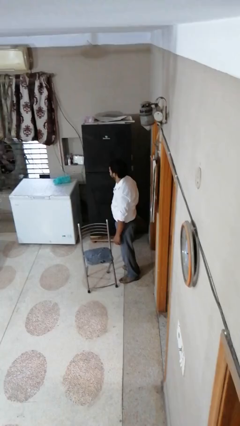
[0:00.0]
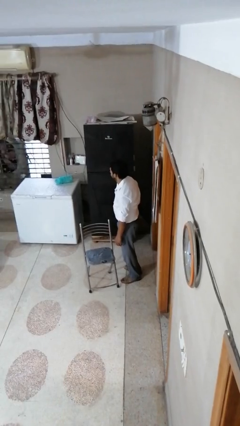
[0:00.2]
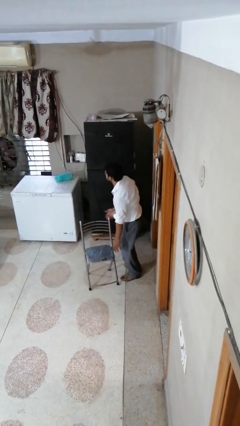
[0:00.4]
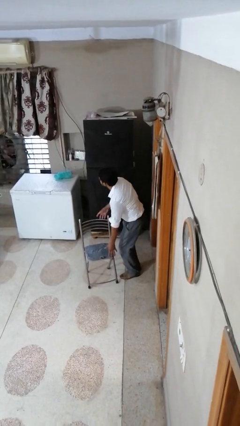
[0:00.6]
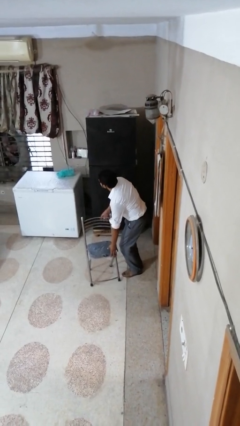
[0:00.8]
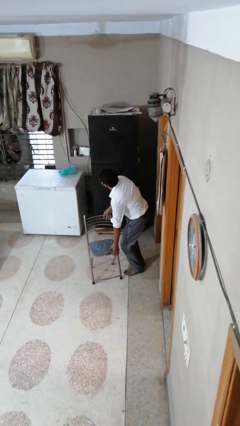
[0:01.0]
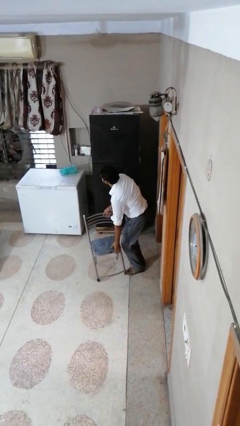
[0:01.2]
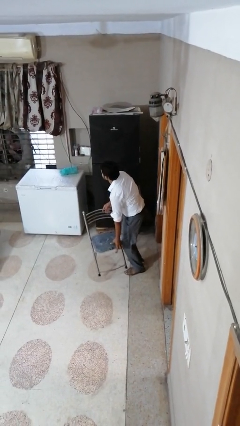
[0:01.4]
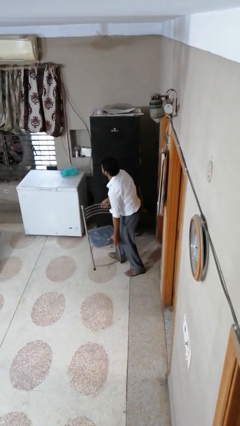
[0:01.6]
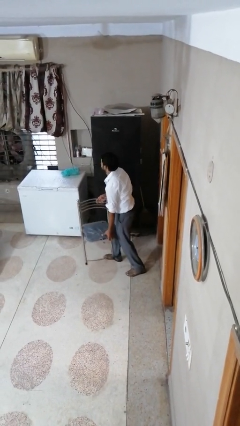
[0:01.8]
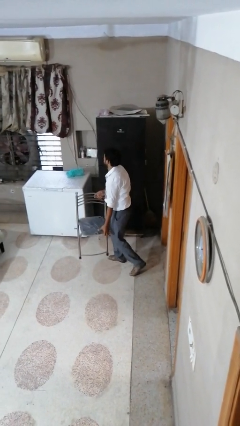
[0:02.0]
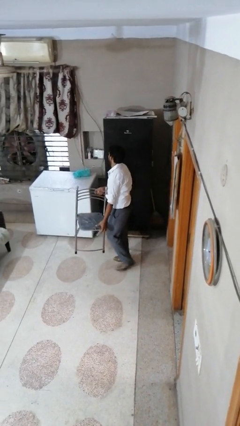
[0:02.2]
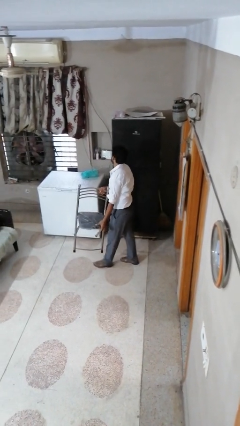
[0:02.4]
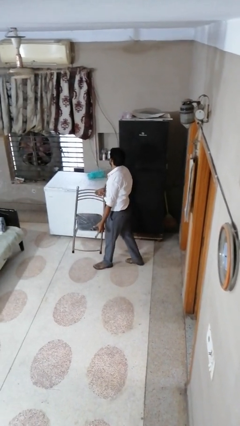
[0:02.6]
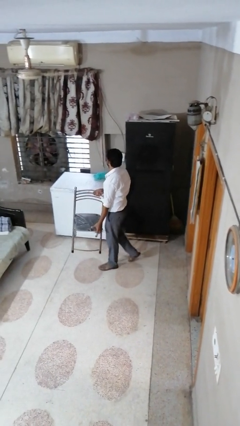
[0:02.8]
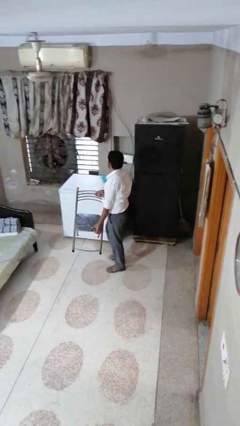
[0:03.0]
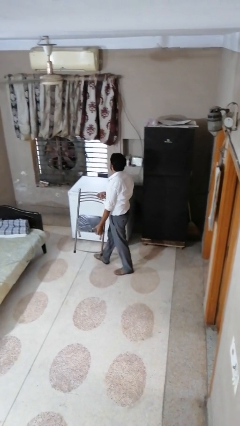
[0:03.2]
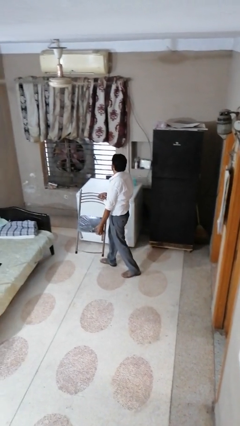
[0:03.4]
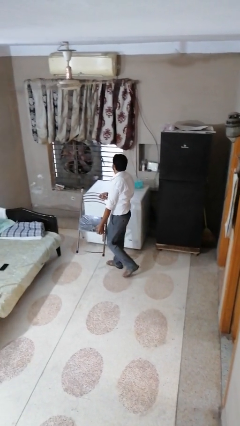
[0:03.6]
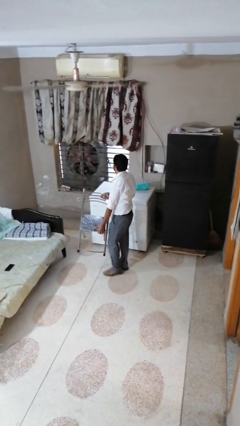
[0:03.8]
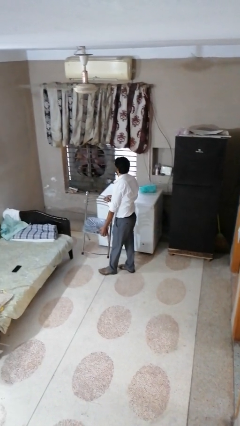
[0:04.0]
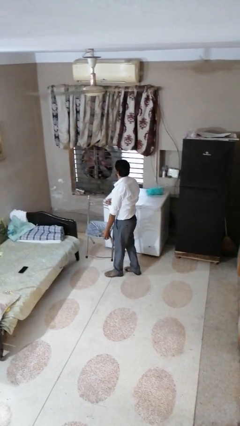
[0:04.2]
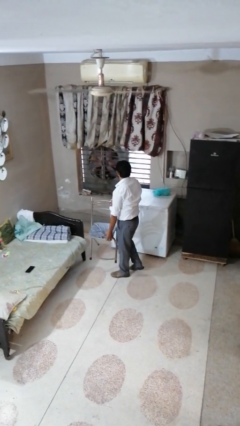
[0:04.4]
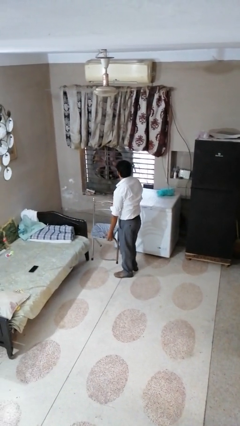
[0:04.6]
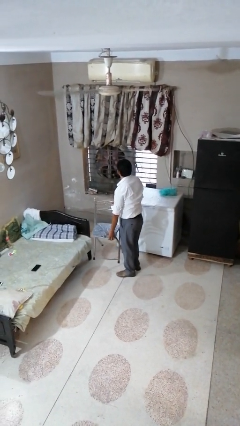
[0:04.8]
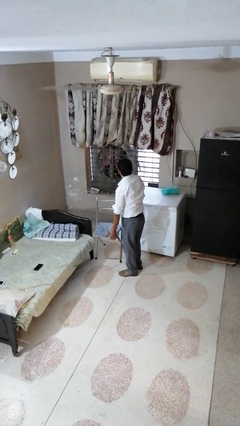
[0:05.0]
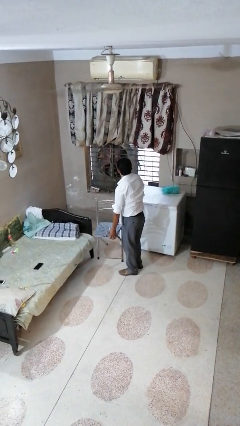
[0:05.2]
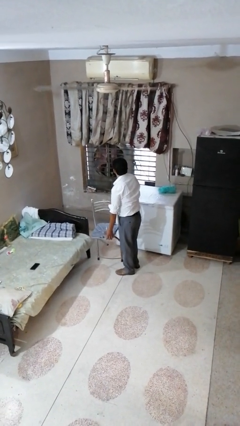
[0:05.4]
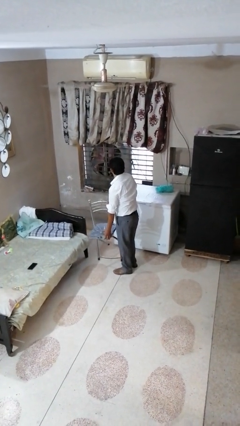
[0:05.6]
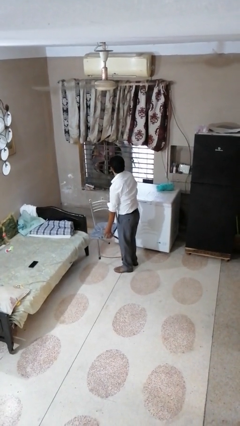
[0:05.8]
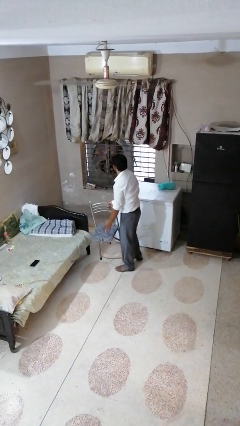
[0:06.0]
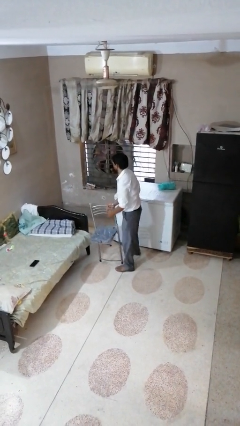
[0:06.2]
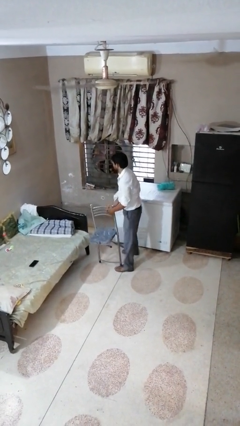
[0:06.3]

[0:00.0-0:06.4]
person carries furniture

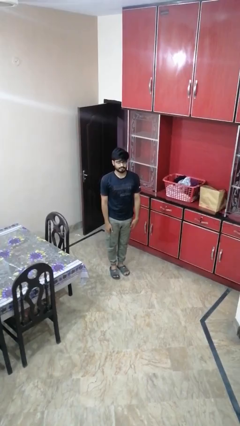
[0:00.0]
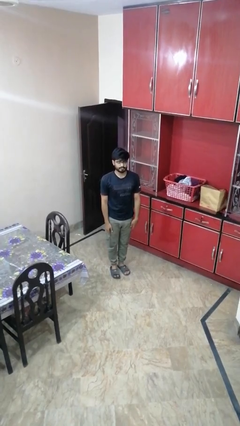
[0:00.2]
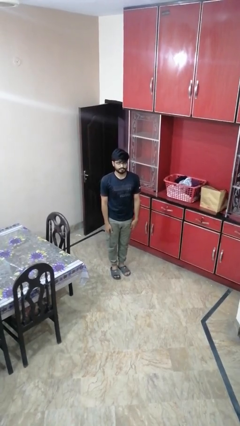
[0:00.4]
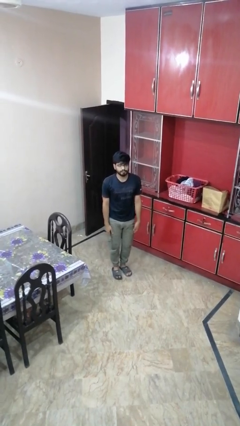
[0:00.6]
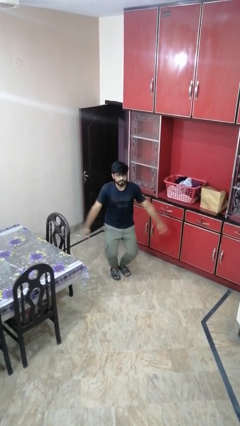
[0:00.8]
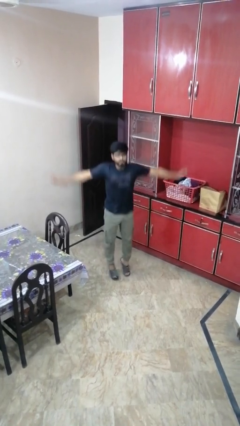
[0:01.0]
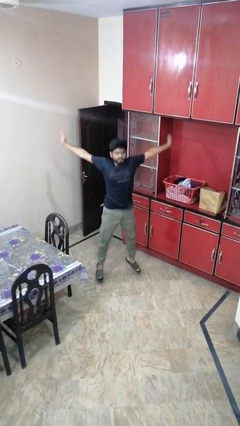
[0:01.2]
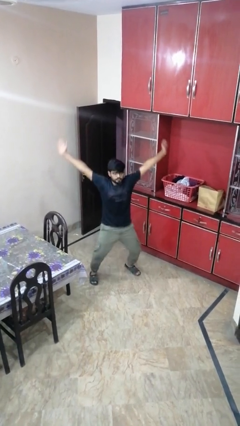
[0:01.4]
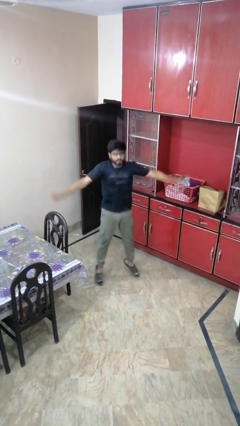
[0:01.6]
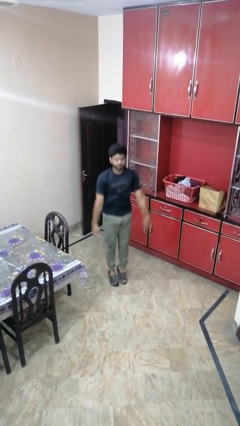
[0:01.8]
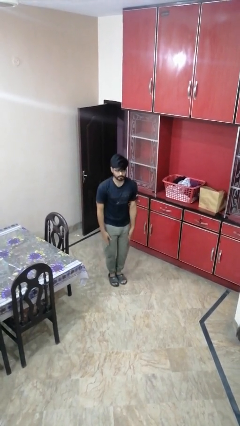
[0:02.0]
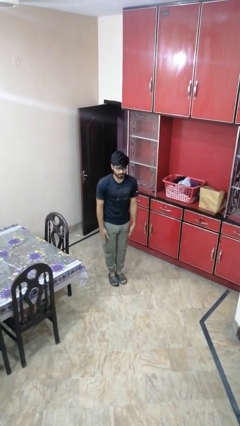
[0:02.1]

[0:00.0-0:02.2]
person exercises with jumping jacks

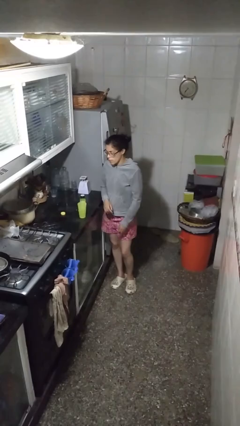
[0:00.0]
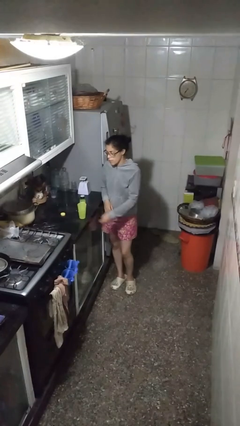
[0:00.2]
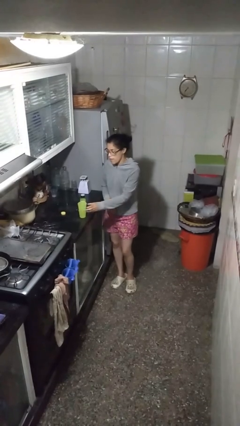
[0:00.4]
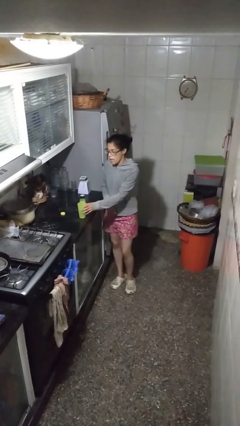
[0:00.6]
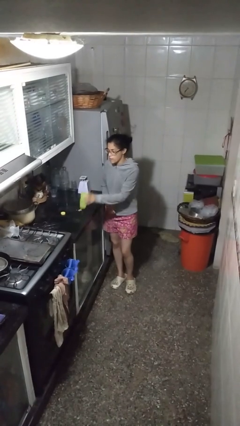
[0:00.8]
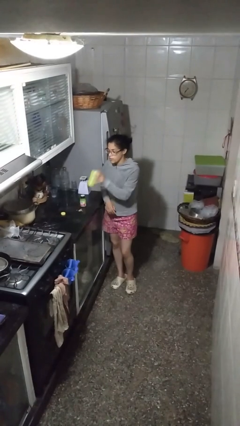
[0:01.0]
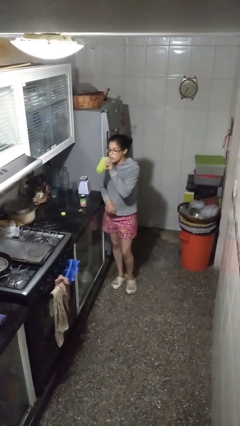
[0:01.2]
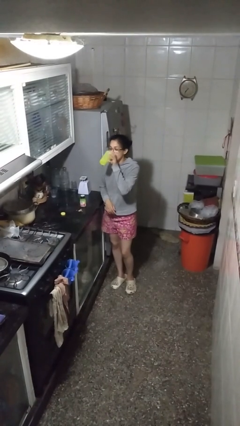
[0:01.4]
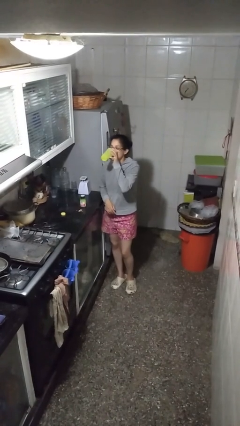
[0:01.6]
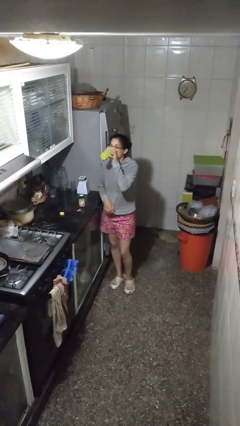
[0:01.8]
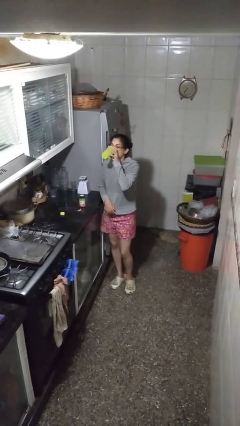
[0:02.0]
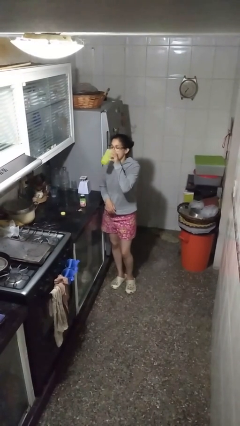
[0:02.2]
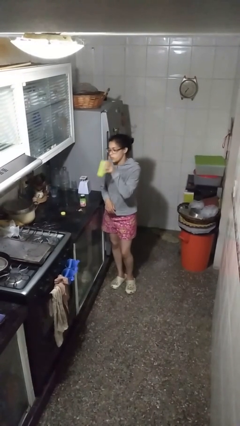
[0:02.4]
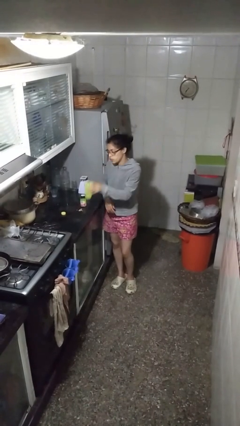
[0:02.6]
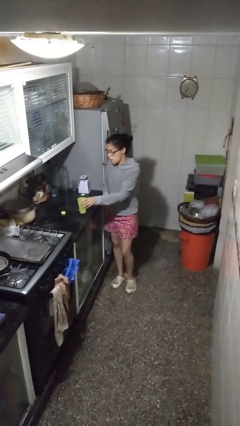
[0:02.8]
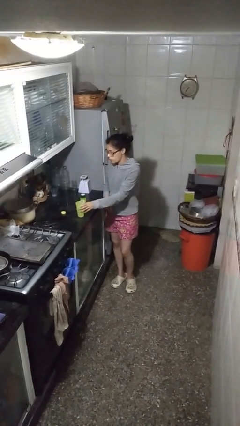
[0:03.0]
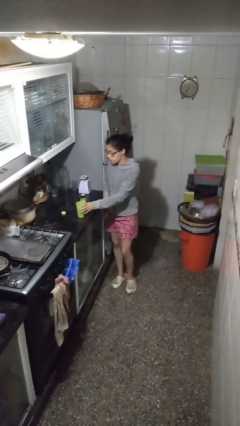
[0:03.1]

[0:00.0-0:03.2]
person drinks from cup

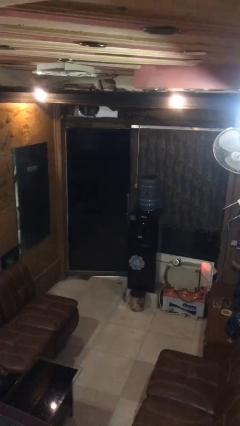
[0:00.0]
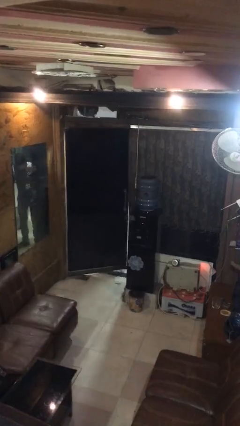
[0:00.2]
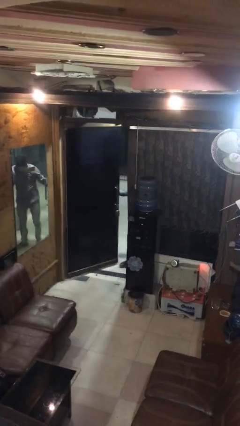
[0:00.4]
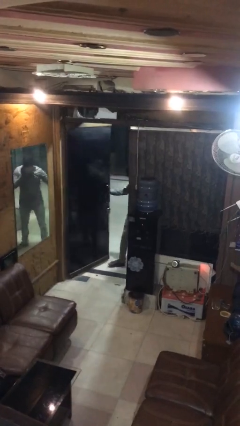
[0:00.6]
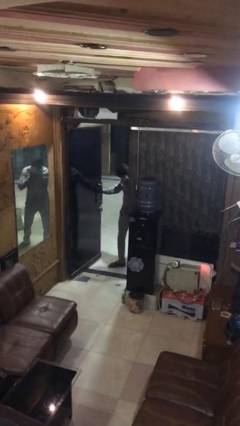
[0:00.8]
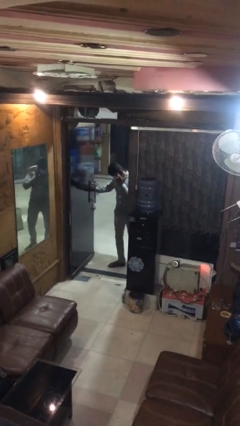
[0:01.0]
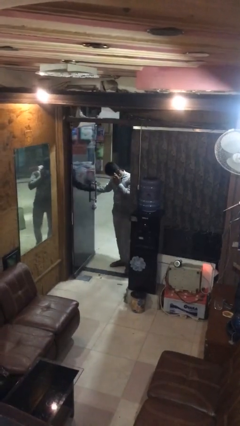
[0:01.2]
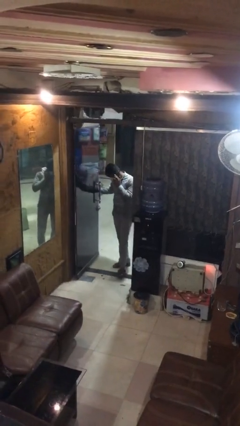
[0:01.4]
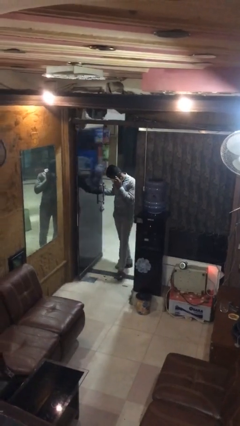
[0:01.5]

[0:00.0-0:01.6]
person opens facility door

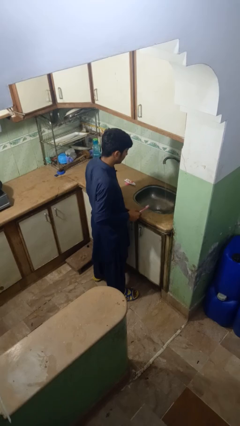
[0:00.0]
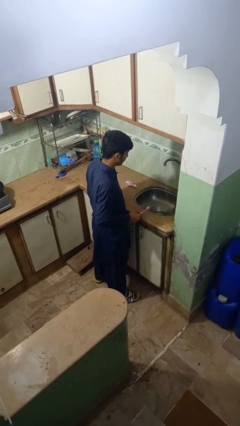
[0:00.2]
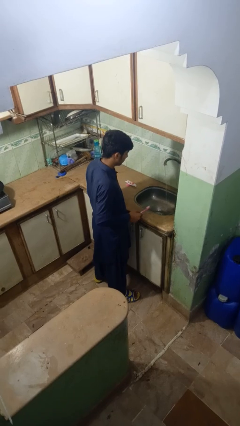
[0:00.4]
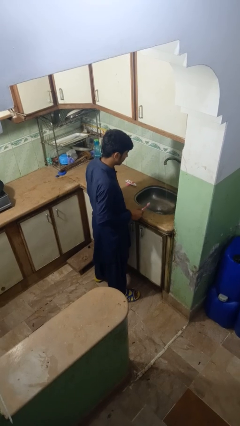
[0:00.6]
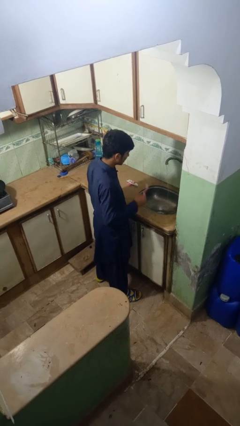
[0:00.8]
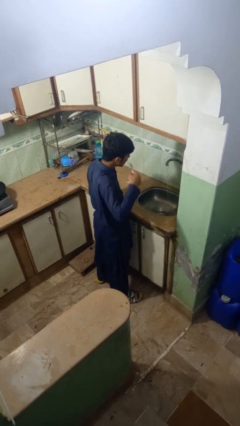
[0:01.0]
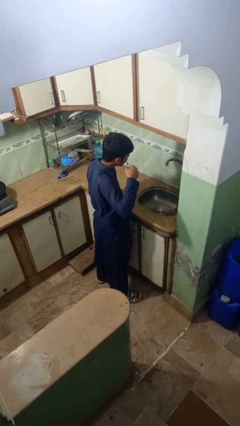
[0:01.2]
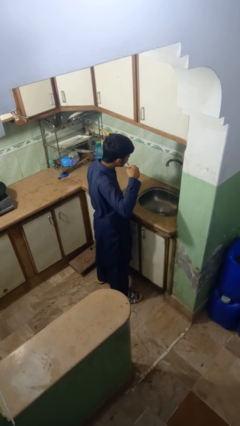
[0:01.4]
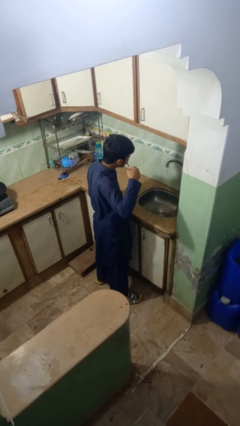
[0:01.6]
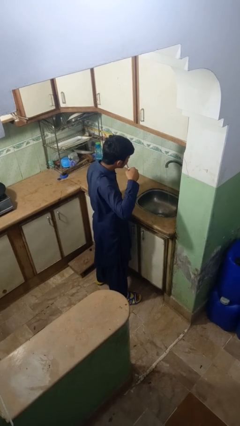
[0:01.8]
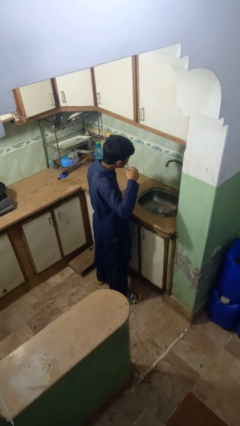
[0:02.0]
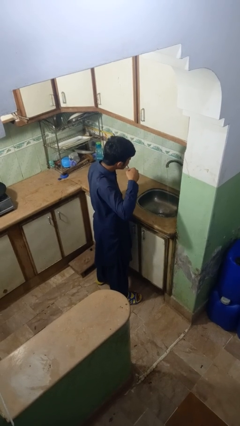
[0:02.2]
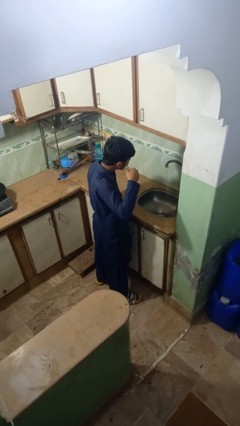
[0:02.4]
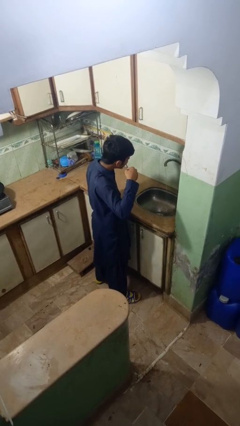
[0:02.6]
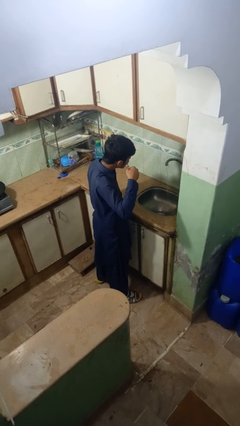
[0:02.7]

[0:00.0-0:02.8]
person brushes teeth

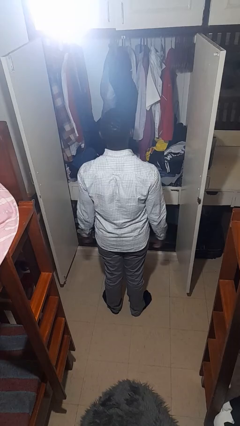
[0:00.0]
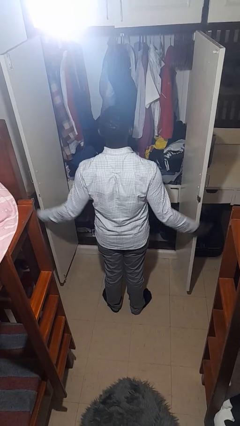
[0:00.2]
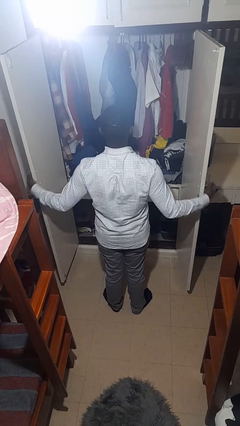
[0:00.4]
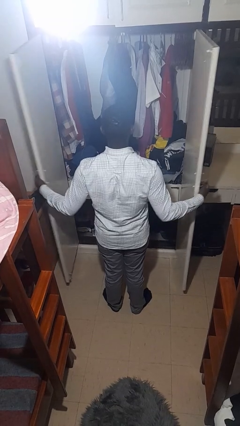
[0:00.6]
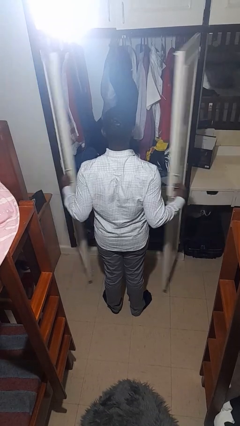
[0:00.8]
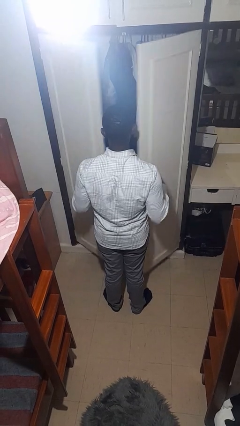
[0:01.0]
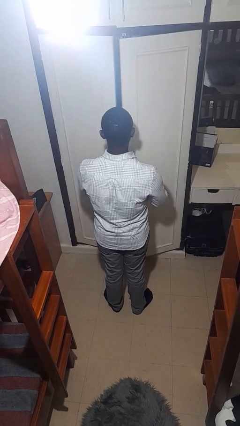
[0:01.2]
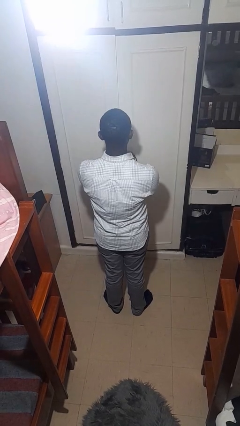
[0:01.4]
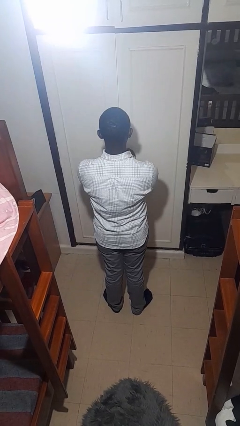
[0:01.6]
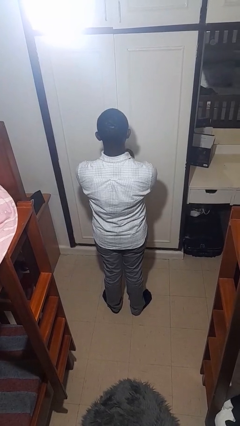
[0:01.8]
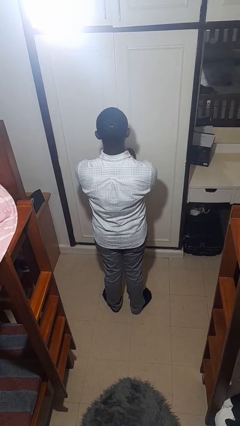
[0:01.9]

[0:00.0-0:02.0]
person closes closet door
